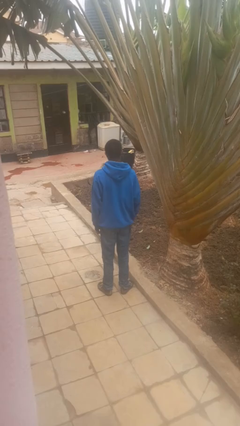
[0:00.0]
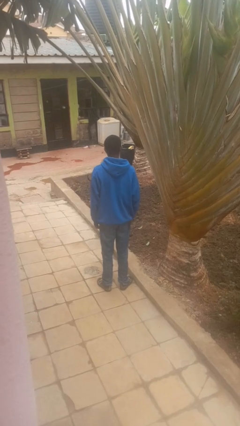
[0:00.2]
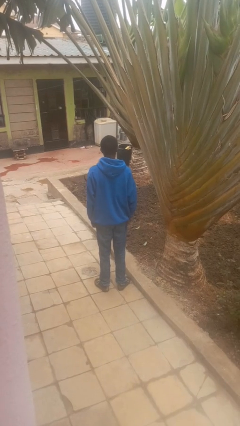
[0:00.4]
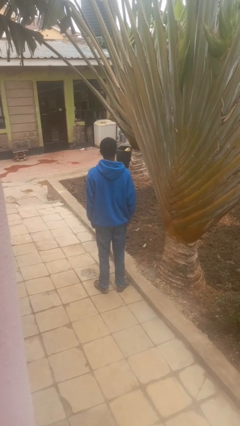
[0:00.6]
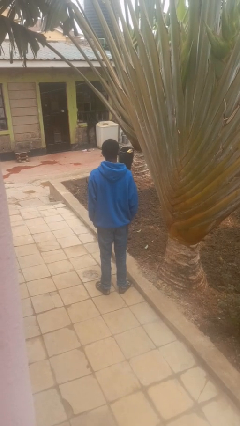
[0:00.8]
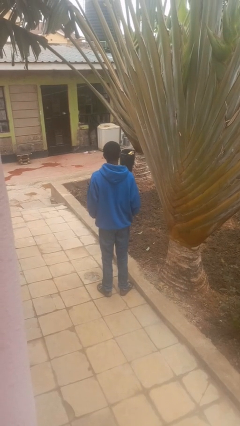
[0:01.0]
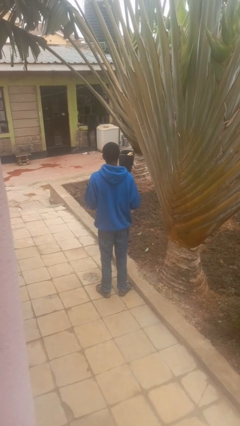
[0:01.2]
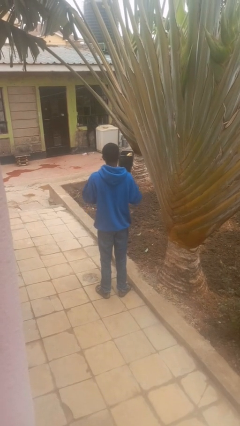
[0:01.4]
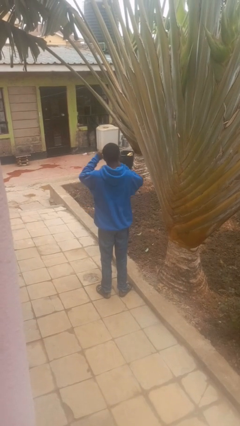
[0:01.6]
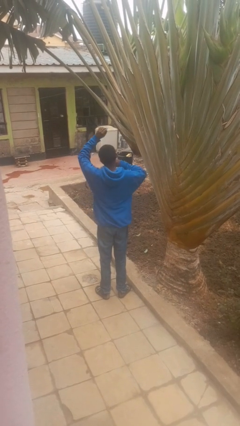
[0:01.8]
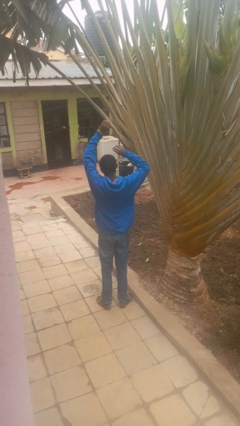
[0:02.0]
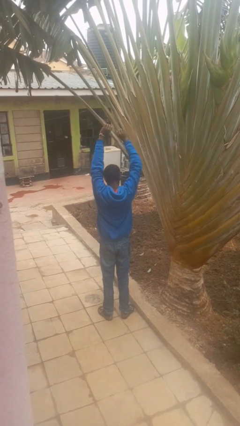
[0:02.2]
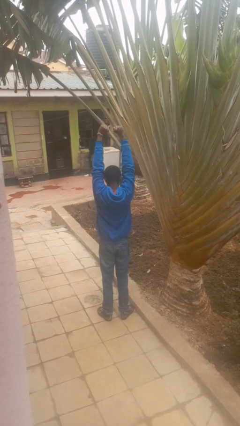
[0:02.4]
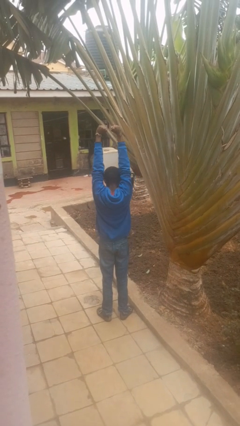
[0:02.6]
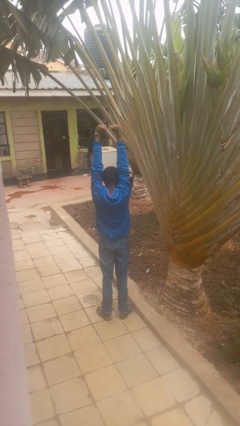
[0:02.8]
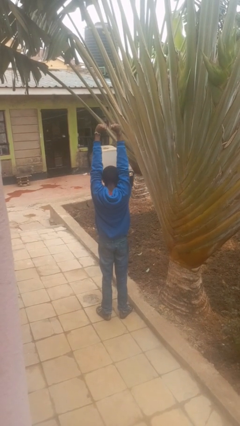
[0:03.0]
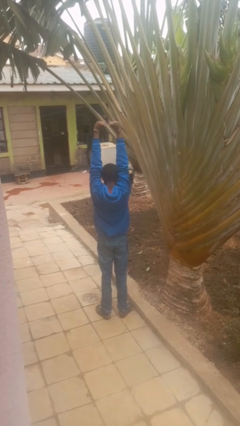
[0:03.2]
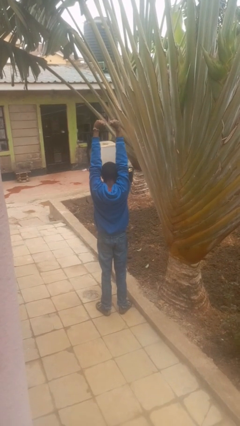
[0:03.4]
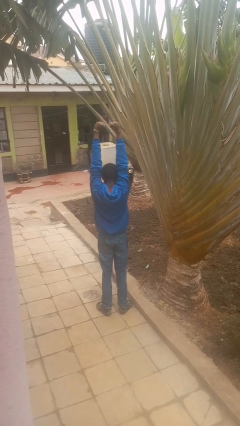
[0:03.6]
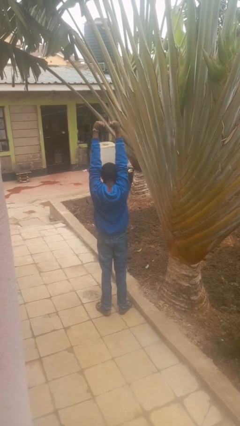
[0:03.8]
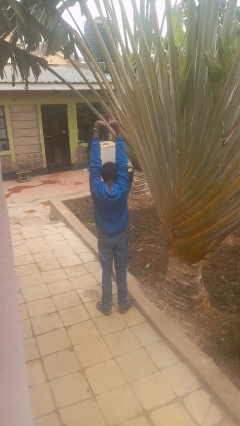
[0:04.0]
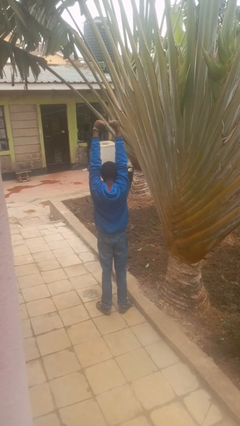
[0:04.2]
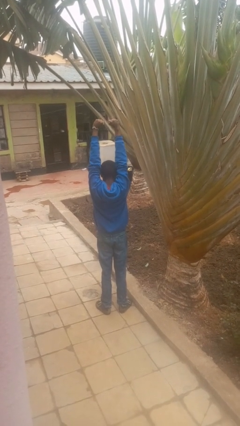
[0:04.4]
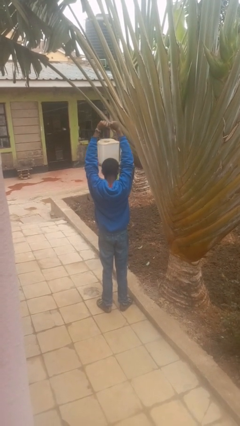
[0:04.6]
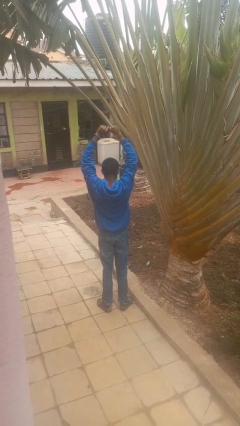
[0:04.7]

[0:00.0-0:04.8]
person stretches arms over head

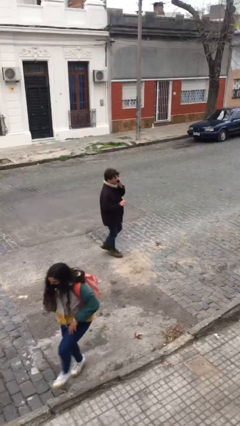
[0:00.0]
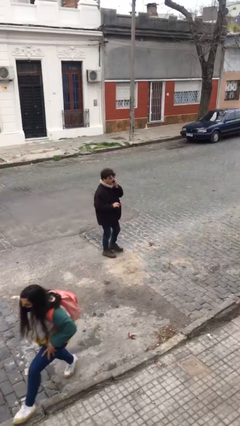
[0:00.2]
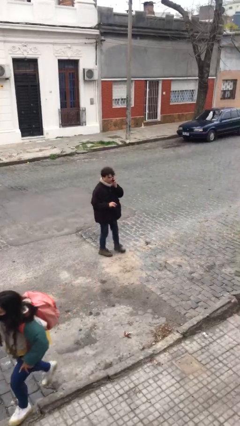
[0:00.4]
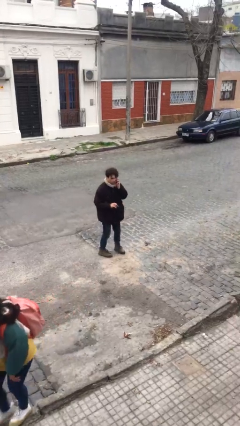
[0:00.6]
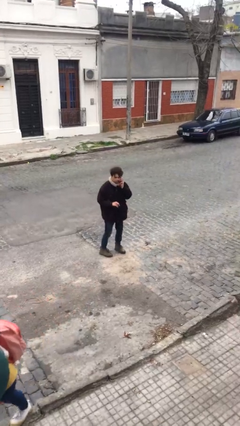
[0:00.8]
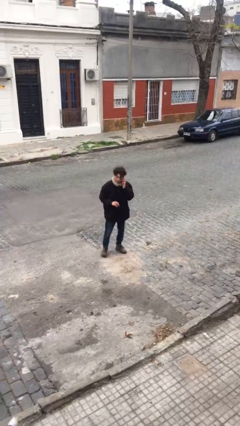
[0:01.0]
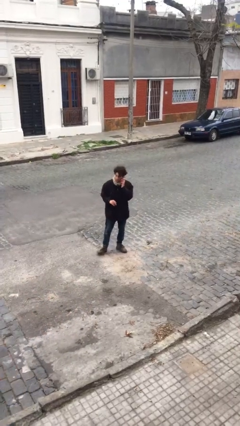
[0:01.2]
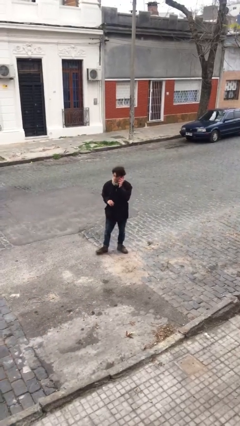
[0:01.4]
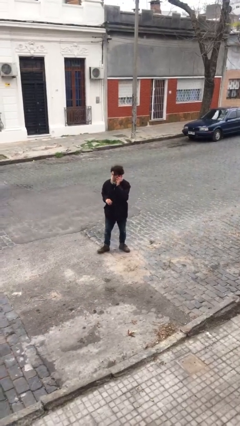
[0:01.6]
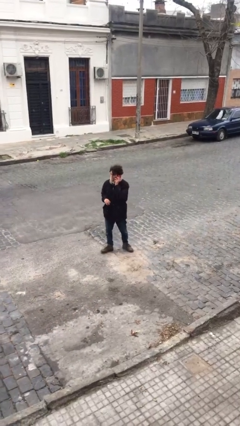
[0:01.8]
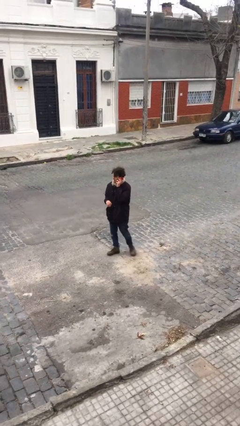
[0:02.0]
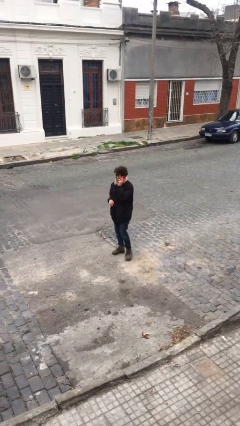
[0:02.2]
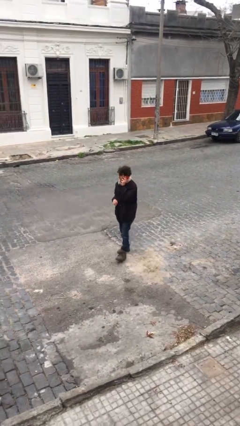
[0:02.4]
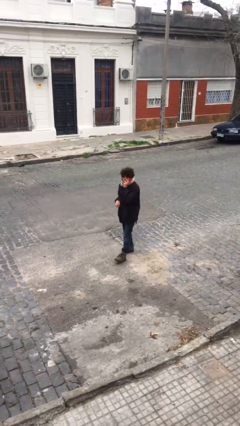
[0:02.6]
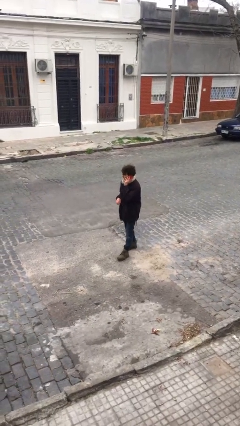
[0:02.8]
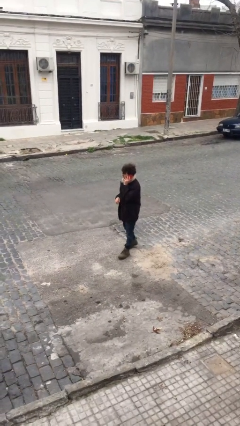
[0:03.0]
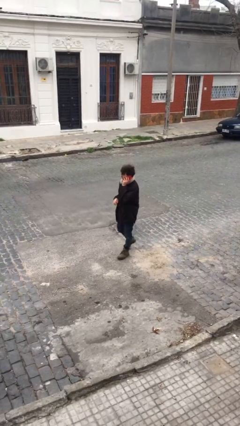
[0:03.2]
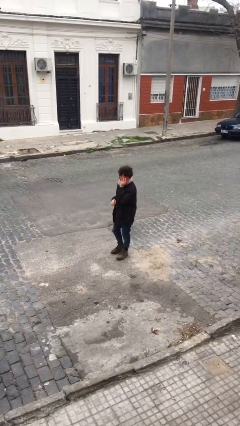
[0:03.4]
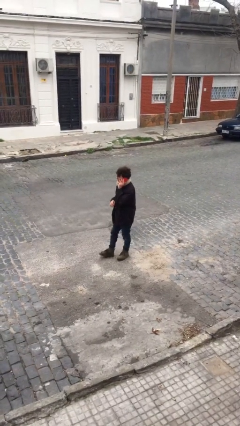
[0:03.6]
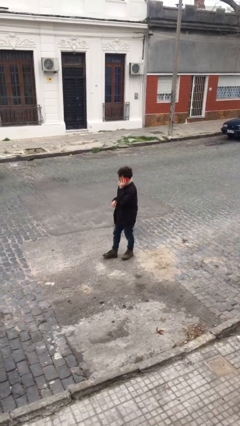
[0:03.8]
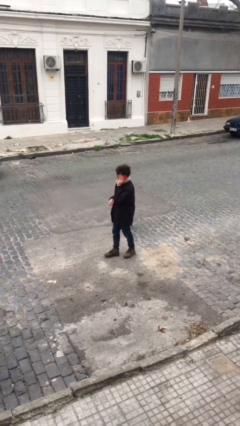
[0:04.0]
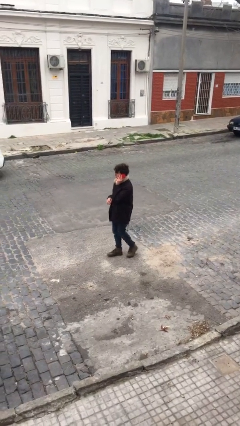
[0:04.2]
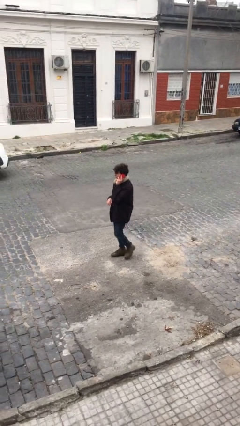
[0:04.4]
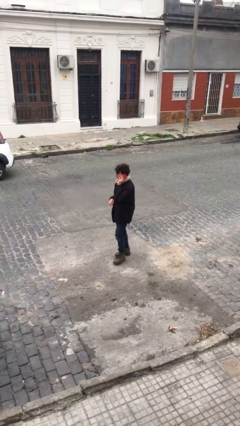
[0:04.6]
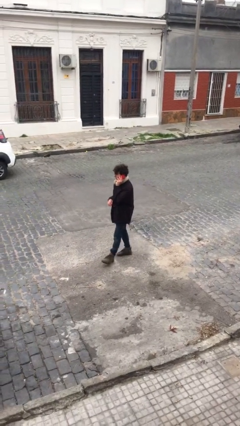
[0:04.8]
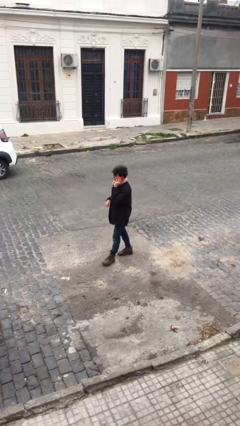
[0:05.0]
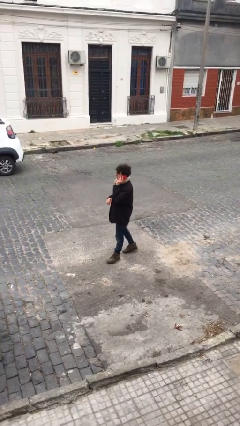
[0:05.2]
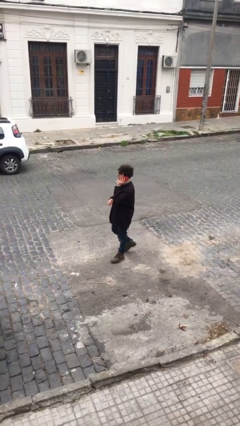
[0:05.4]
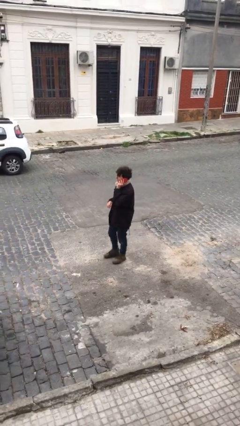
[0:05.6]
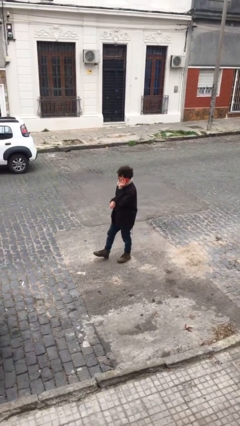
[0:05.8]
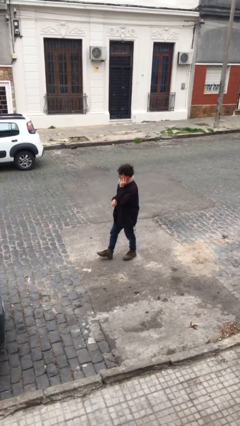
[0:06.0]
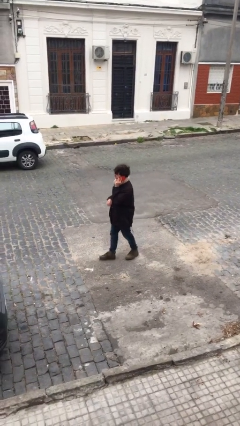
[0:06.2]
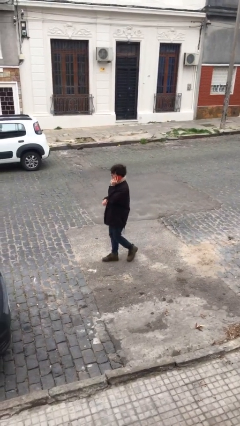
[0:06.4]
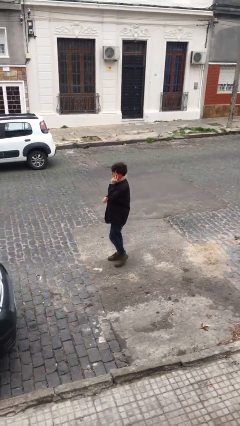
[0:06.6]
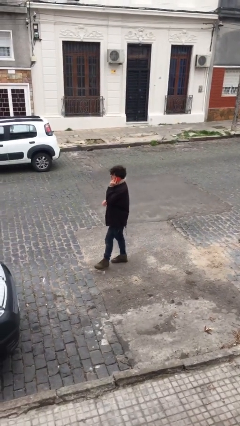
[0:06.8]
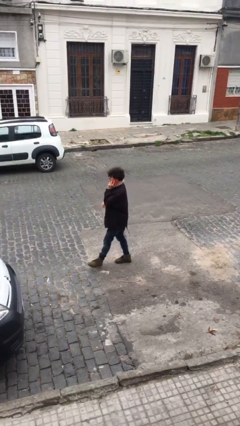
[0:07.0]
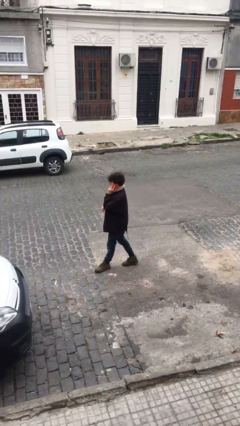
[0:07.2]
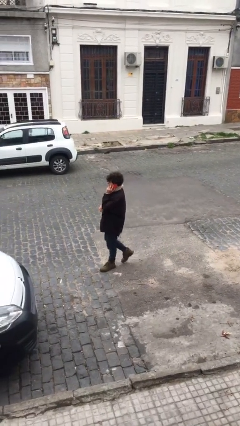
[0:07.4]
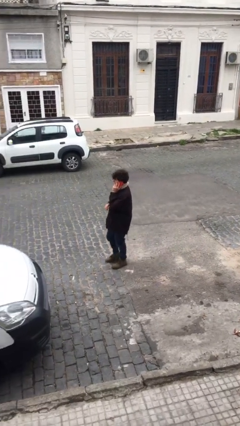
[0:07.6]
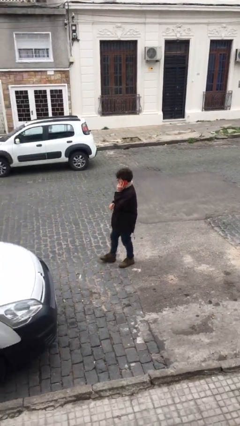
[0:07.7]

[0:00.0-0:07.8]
person talks on phone

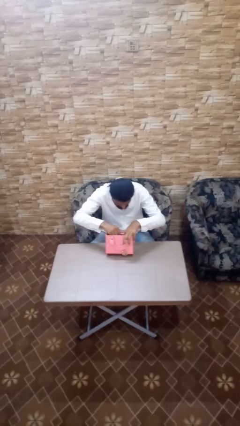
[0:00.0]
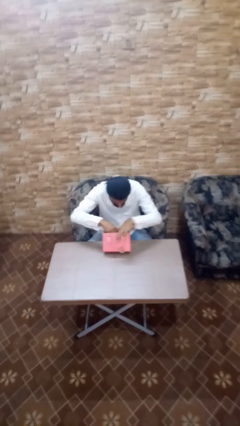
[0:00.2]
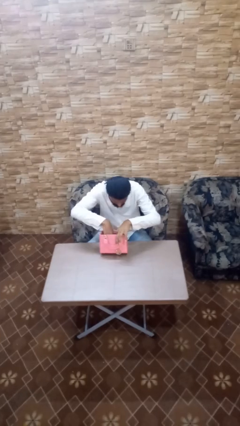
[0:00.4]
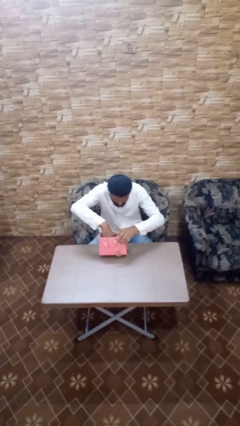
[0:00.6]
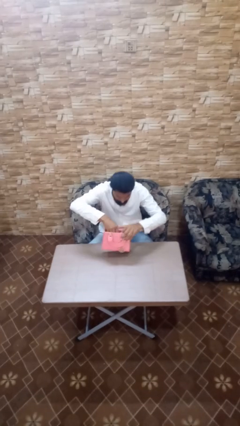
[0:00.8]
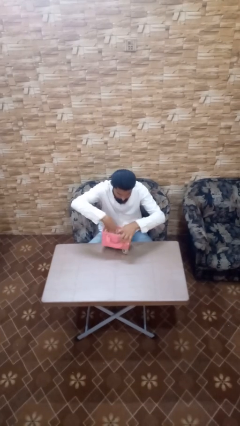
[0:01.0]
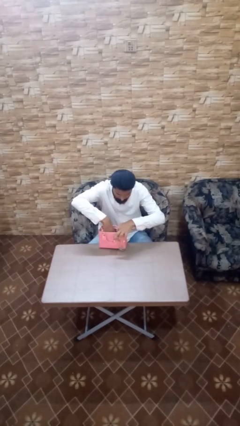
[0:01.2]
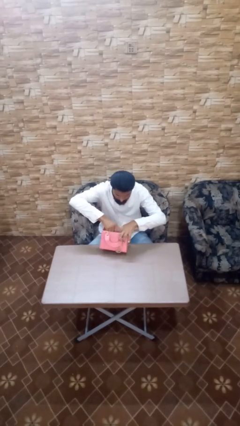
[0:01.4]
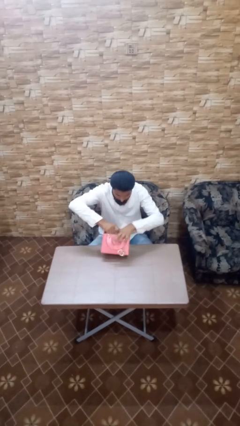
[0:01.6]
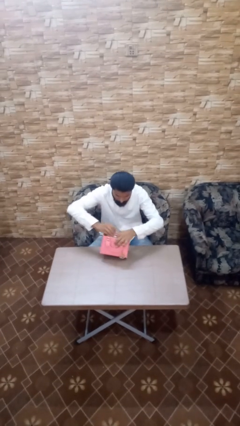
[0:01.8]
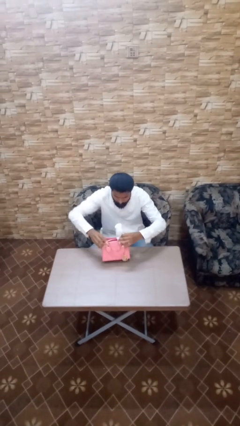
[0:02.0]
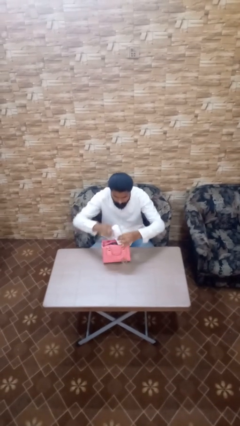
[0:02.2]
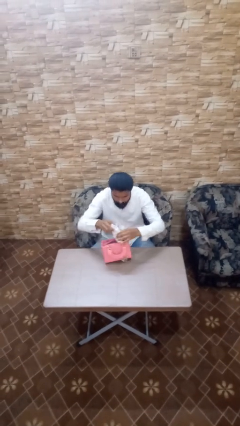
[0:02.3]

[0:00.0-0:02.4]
person takes object from purse

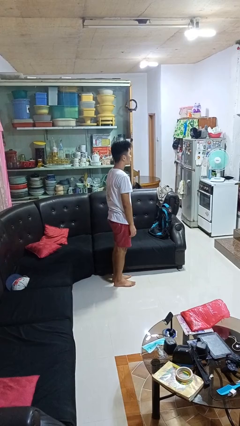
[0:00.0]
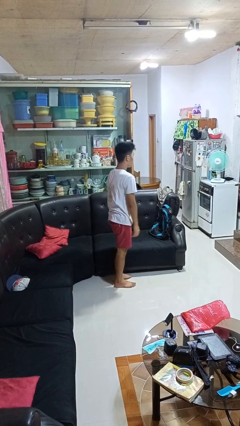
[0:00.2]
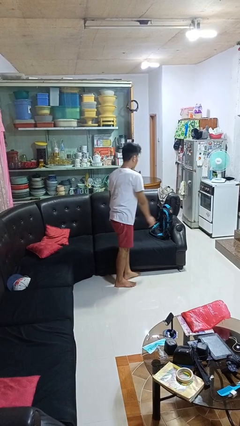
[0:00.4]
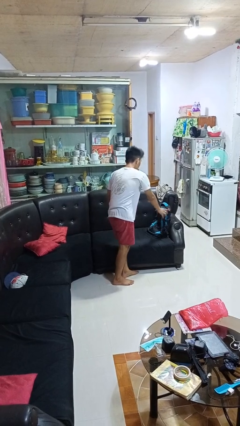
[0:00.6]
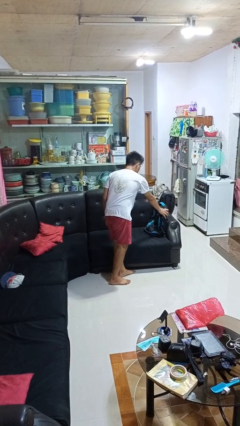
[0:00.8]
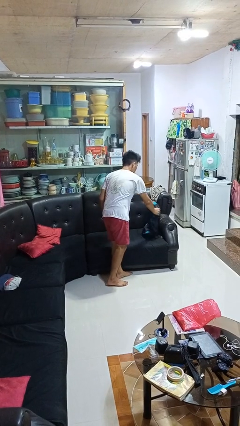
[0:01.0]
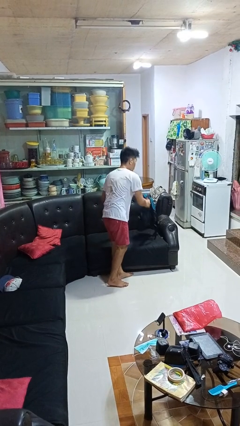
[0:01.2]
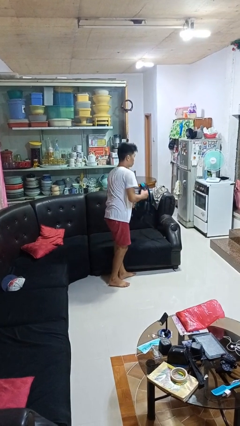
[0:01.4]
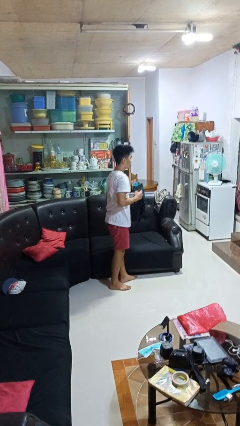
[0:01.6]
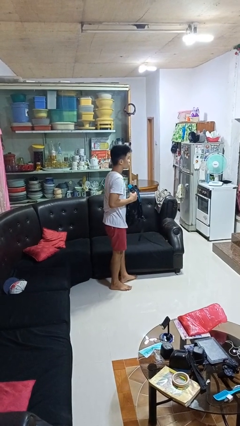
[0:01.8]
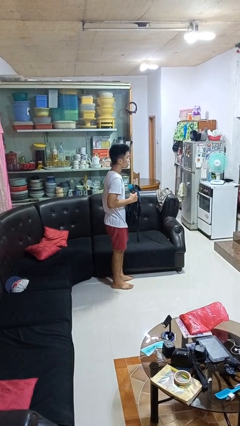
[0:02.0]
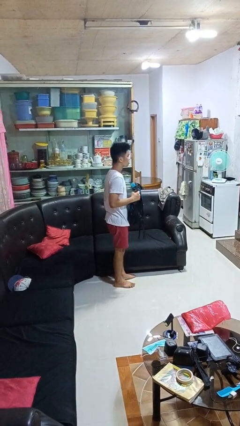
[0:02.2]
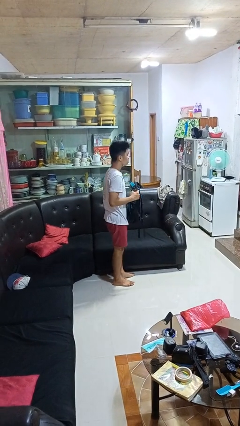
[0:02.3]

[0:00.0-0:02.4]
person picks up object from couch
